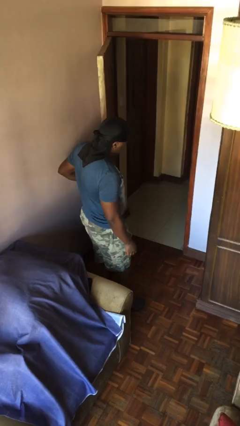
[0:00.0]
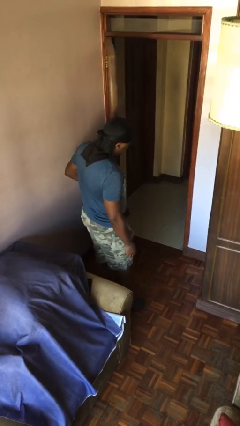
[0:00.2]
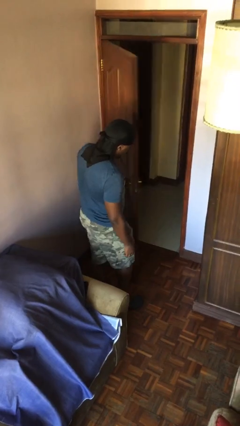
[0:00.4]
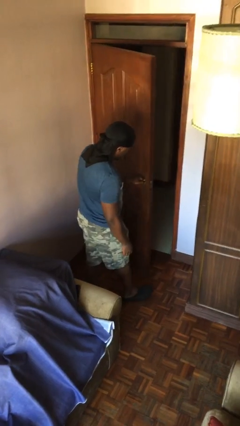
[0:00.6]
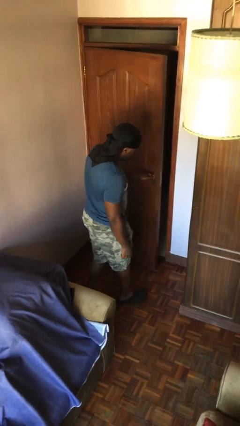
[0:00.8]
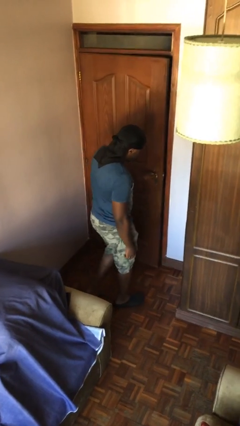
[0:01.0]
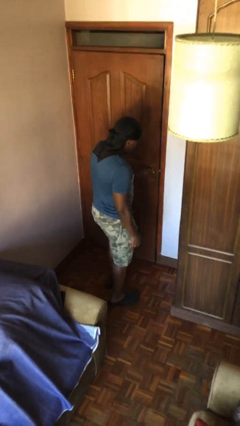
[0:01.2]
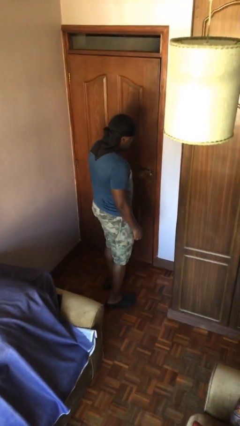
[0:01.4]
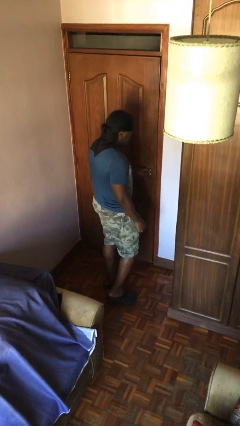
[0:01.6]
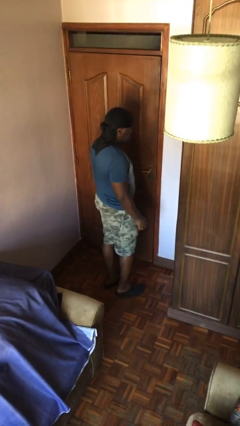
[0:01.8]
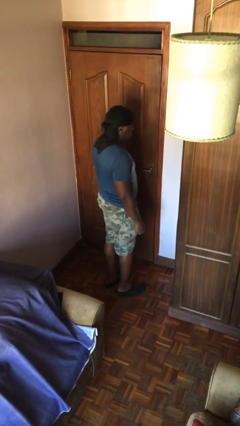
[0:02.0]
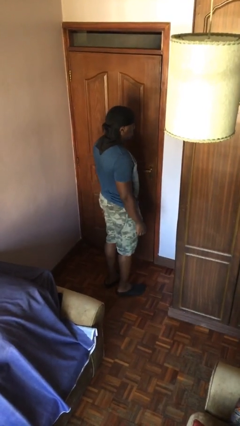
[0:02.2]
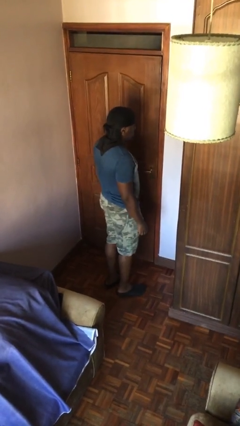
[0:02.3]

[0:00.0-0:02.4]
person closes facility door

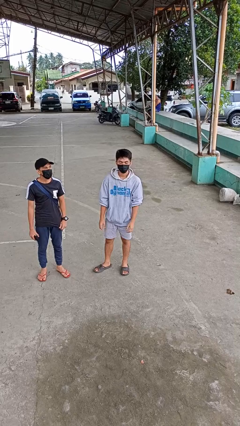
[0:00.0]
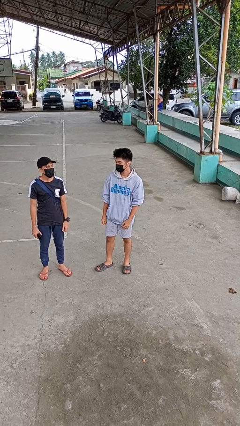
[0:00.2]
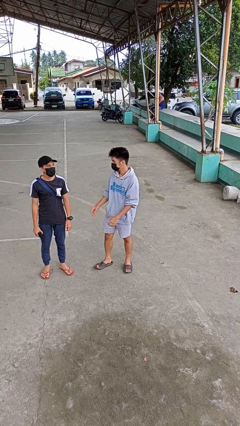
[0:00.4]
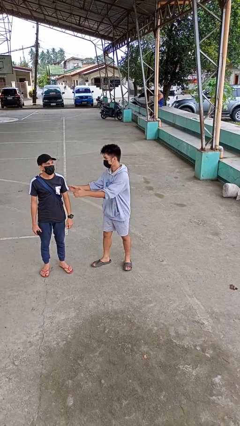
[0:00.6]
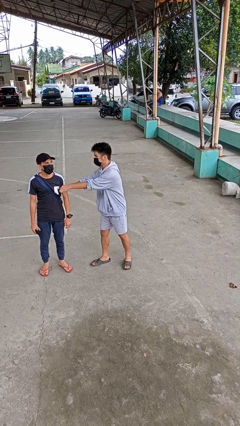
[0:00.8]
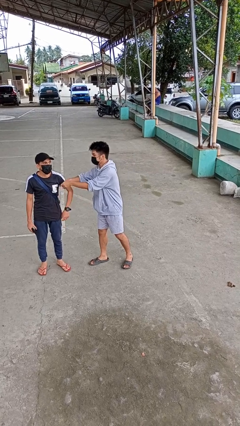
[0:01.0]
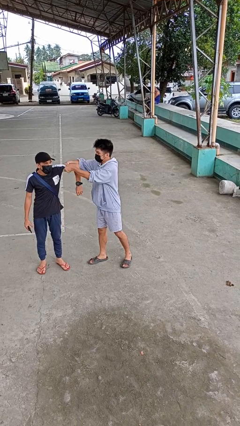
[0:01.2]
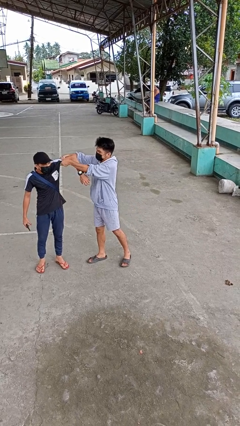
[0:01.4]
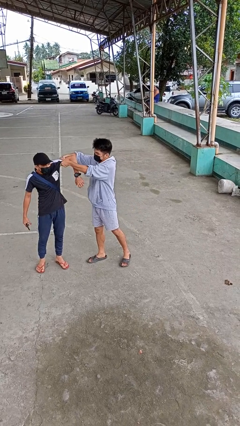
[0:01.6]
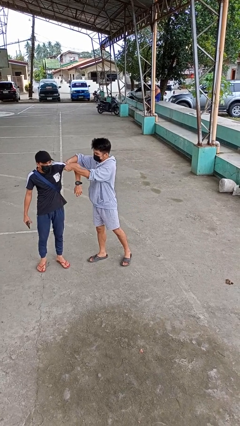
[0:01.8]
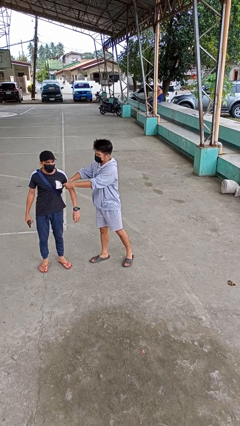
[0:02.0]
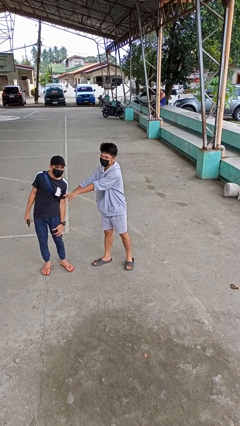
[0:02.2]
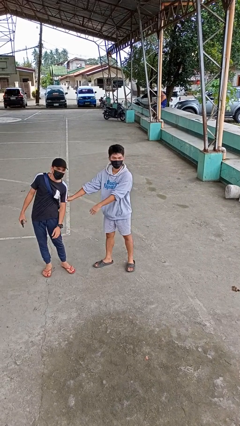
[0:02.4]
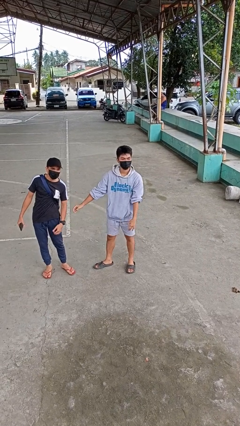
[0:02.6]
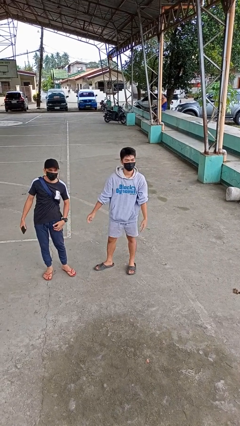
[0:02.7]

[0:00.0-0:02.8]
person grabs person by bicep

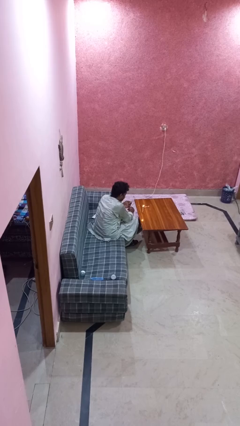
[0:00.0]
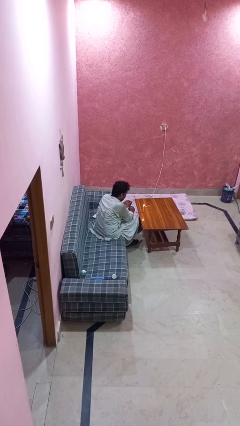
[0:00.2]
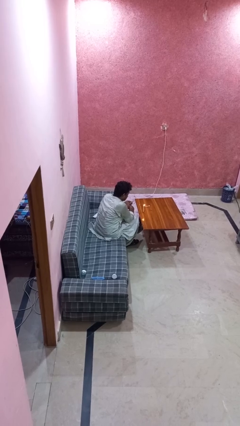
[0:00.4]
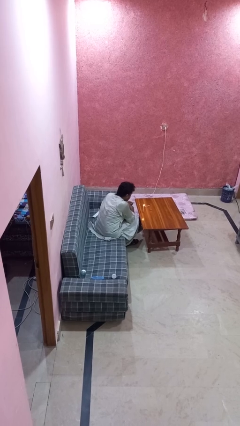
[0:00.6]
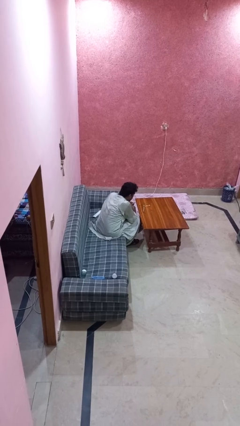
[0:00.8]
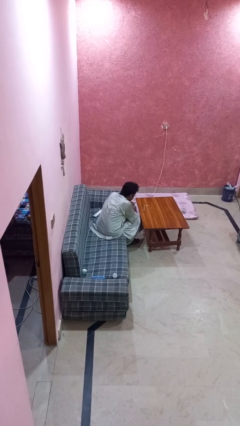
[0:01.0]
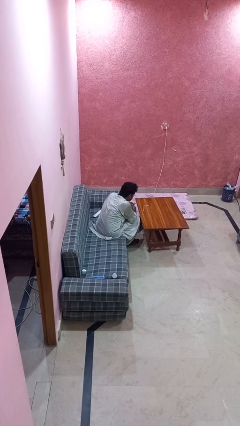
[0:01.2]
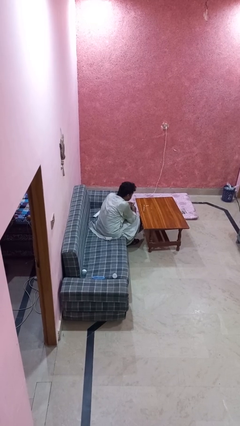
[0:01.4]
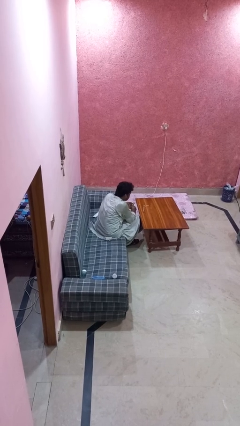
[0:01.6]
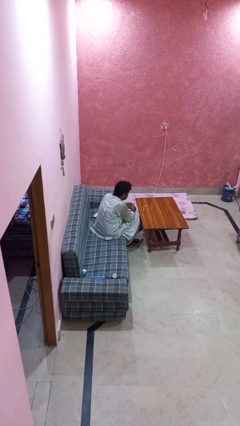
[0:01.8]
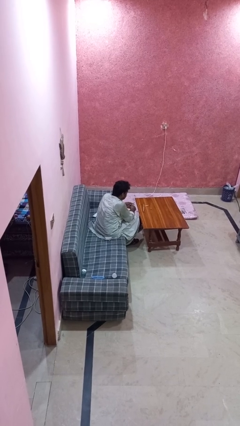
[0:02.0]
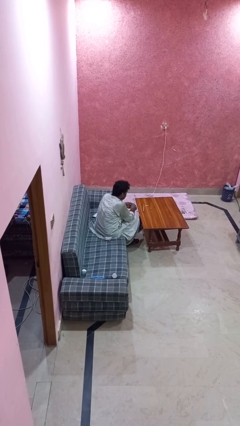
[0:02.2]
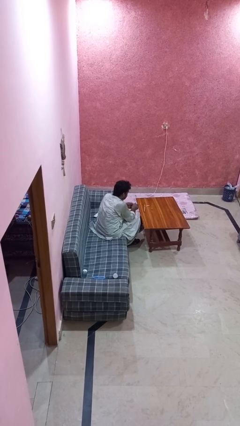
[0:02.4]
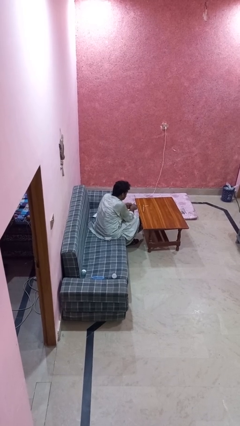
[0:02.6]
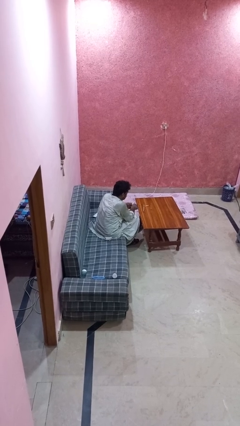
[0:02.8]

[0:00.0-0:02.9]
person extinguishes candle

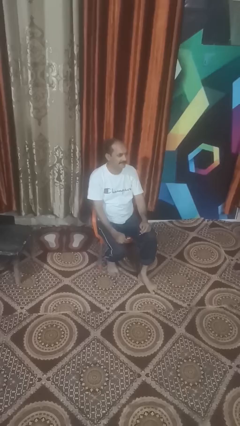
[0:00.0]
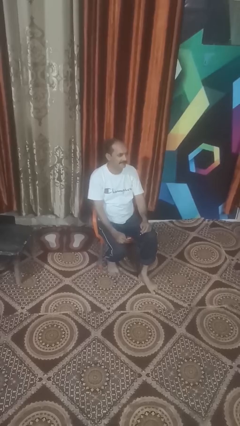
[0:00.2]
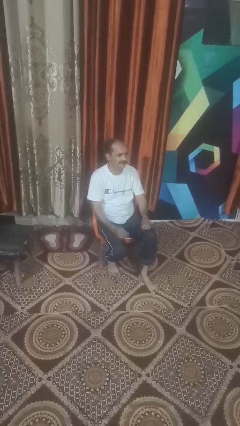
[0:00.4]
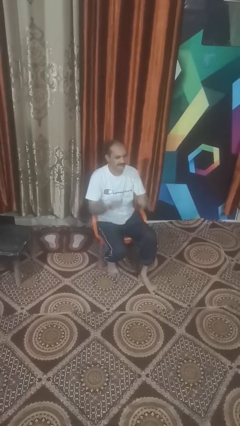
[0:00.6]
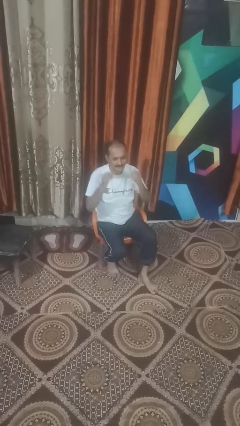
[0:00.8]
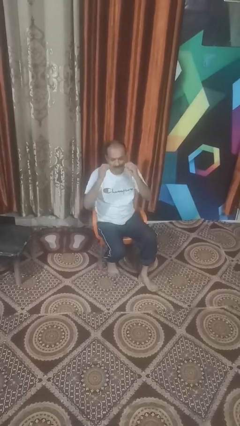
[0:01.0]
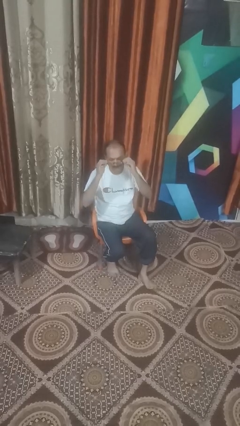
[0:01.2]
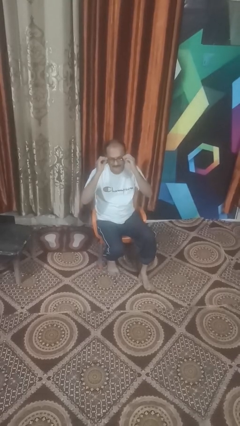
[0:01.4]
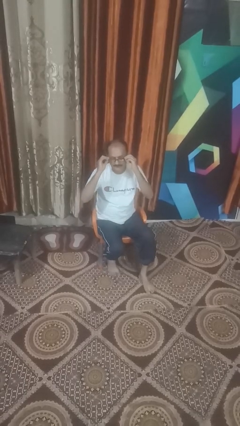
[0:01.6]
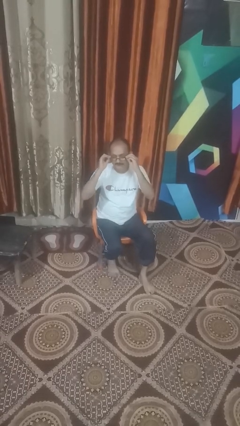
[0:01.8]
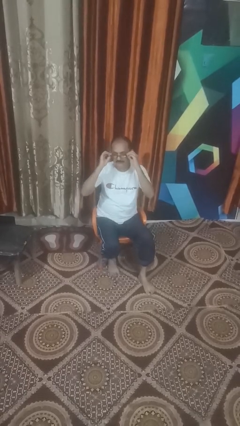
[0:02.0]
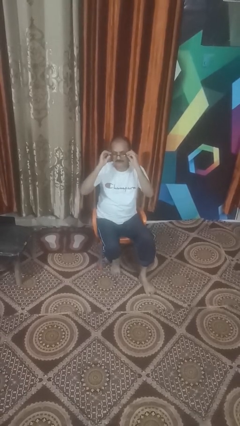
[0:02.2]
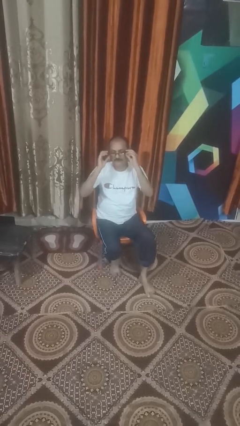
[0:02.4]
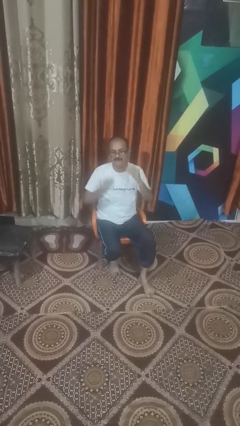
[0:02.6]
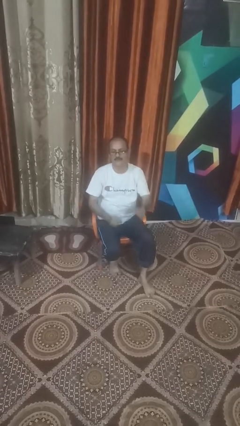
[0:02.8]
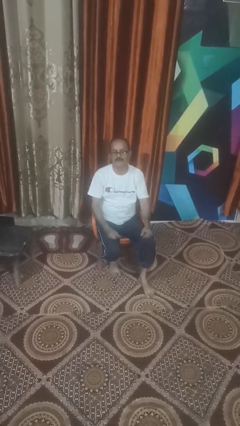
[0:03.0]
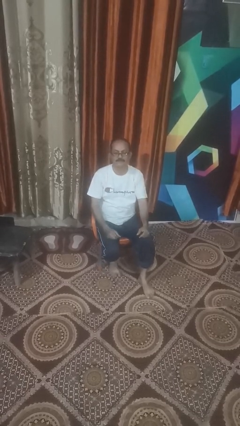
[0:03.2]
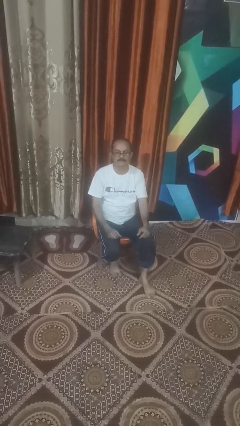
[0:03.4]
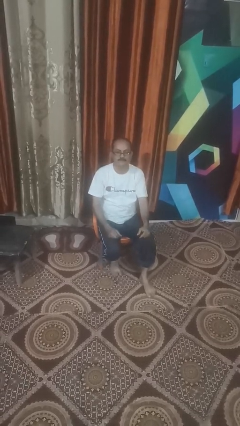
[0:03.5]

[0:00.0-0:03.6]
person puts on glasses

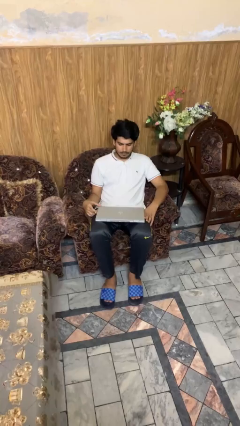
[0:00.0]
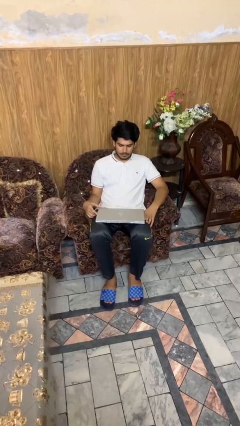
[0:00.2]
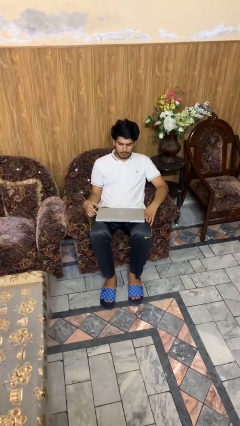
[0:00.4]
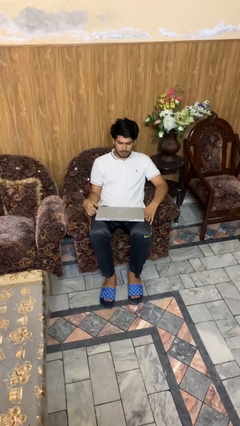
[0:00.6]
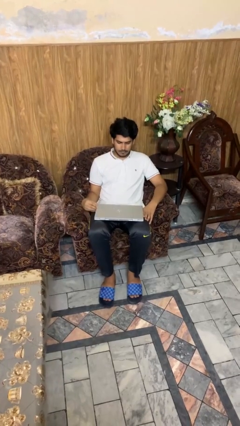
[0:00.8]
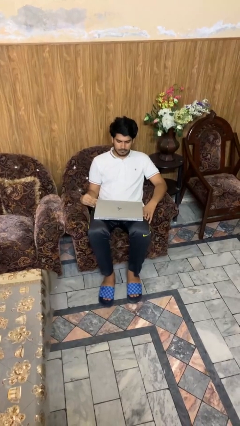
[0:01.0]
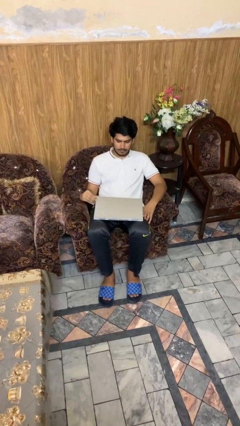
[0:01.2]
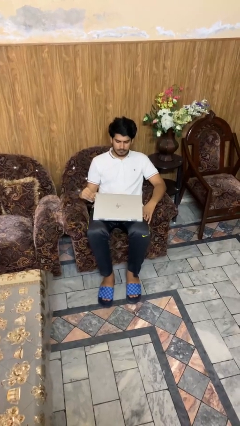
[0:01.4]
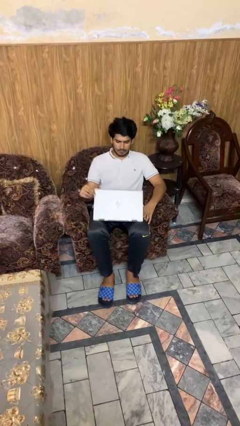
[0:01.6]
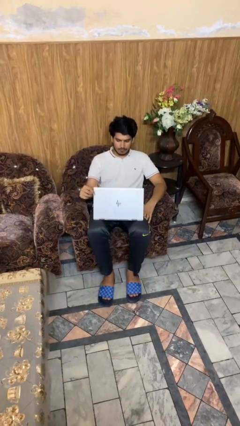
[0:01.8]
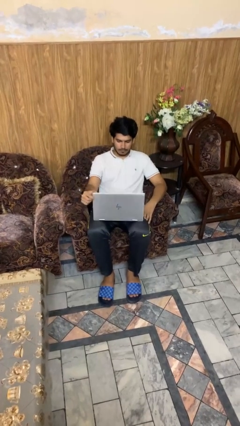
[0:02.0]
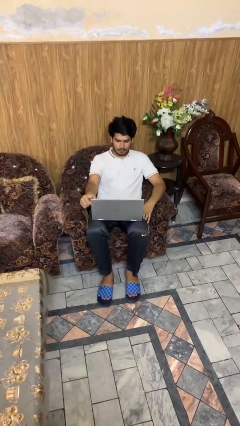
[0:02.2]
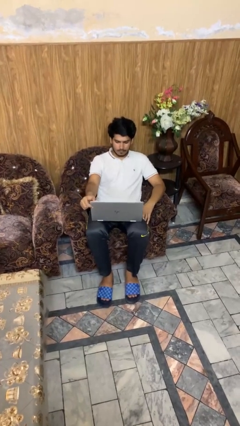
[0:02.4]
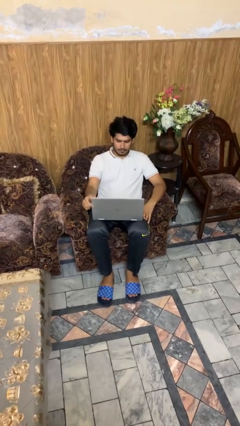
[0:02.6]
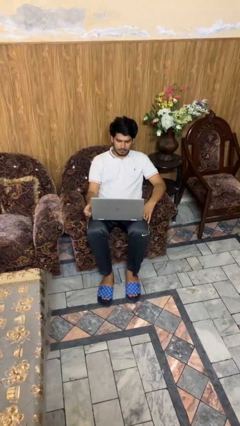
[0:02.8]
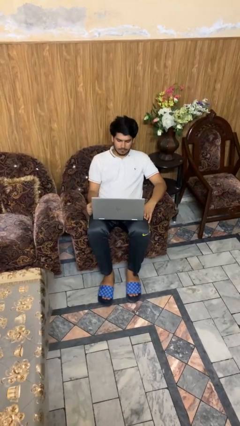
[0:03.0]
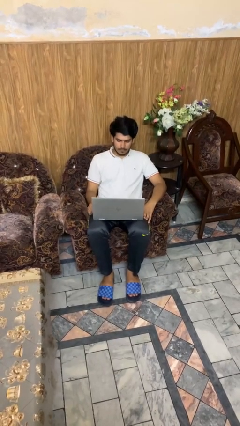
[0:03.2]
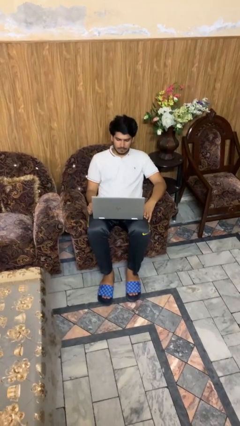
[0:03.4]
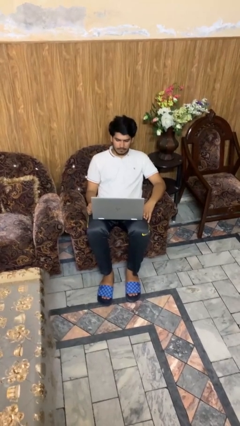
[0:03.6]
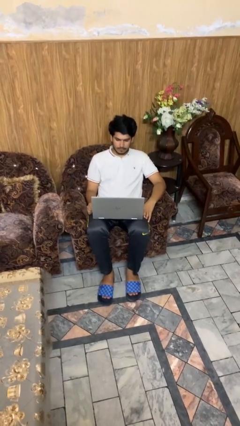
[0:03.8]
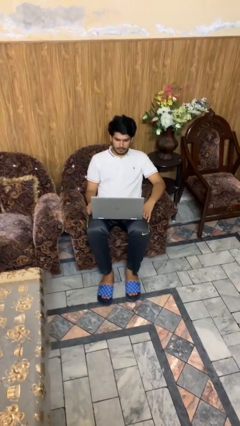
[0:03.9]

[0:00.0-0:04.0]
person opens laptop

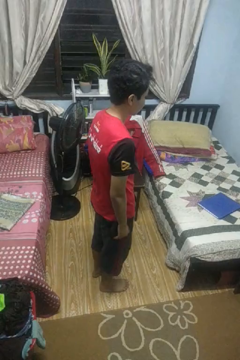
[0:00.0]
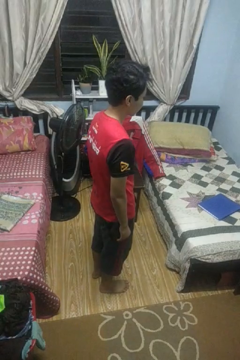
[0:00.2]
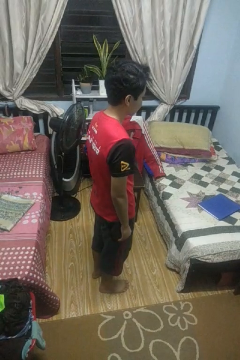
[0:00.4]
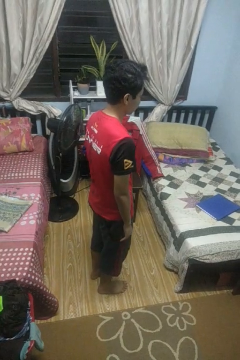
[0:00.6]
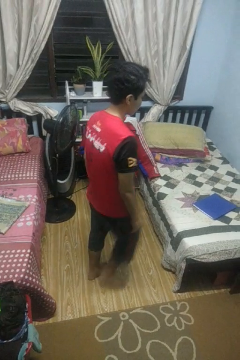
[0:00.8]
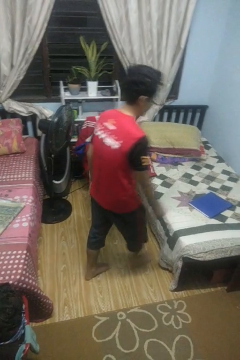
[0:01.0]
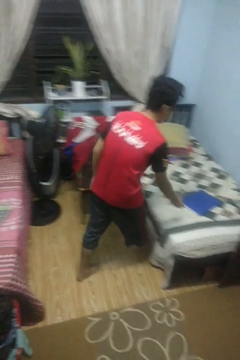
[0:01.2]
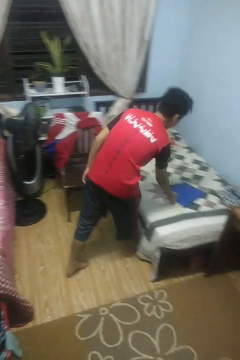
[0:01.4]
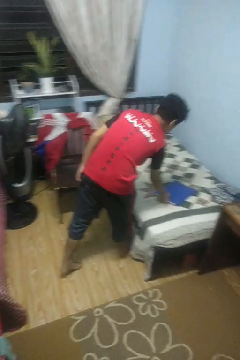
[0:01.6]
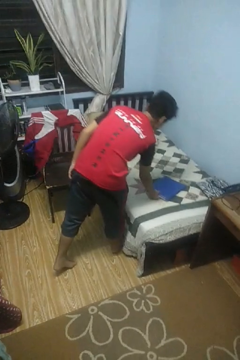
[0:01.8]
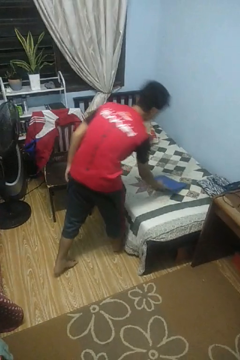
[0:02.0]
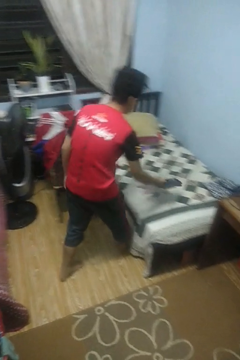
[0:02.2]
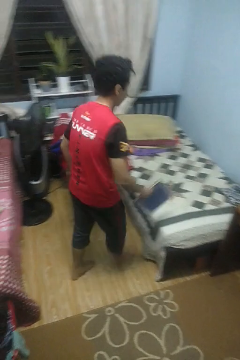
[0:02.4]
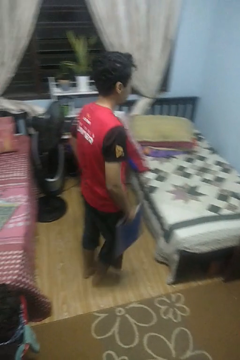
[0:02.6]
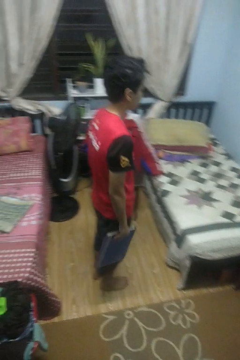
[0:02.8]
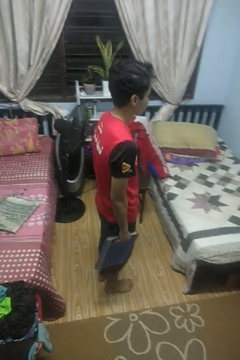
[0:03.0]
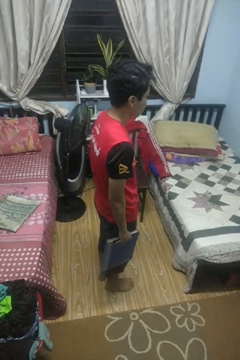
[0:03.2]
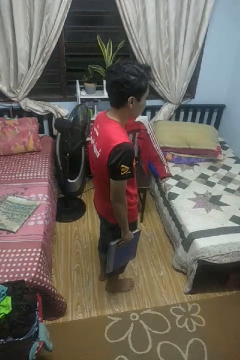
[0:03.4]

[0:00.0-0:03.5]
person picks up object from bed
